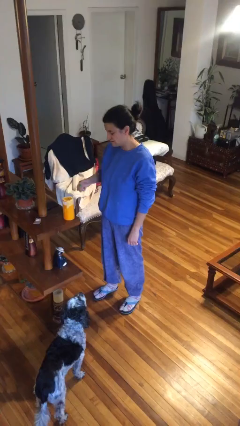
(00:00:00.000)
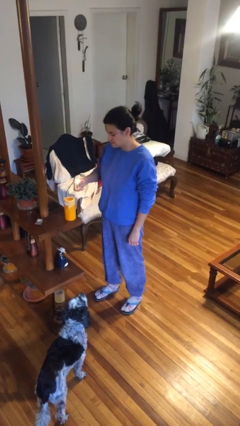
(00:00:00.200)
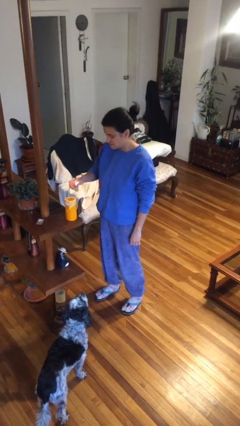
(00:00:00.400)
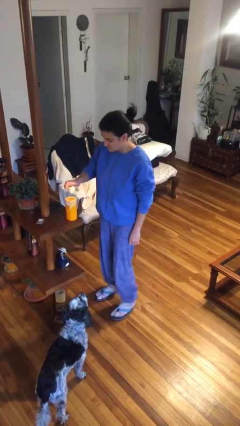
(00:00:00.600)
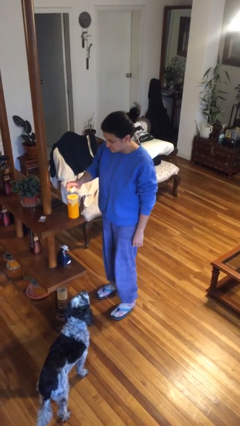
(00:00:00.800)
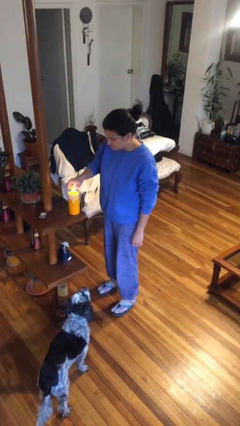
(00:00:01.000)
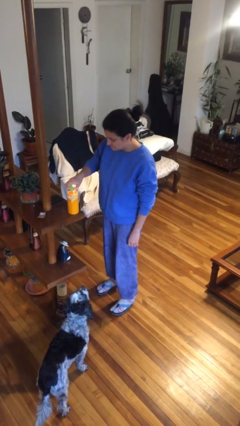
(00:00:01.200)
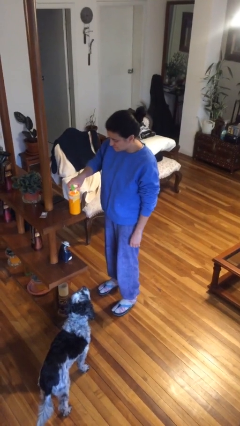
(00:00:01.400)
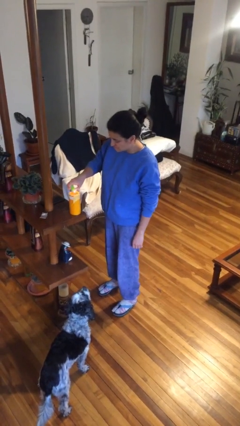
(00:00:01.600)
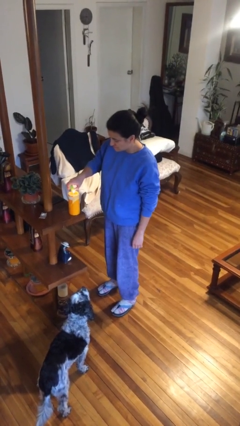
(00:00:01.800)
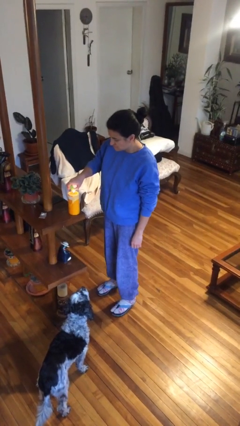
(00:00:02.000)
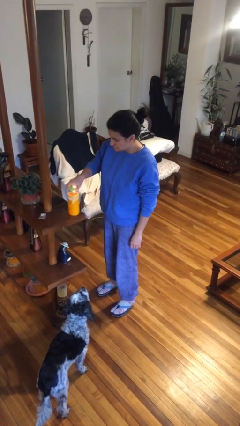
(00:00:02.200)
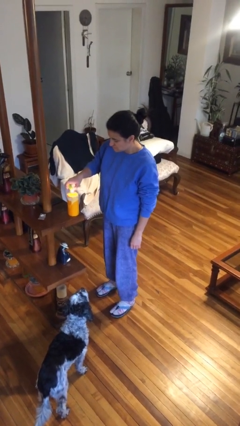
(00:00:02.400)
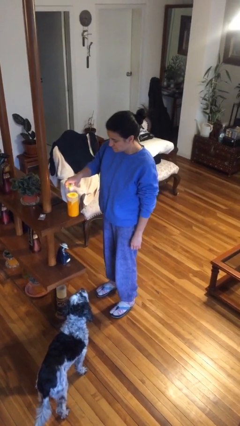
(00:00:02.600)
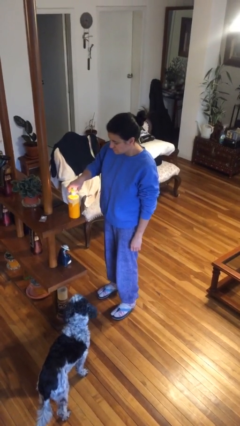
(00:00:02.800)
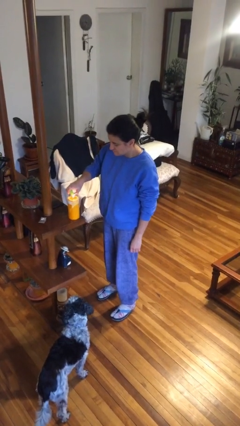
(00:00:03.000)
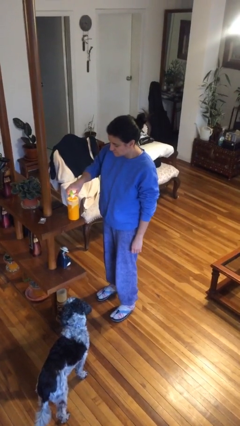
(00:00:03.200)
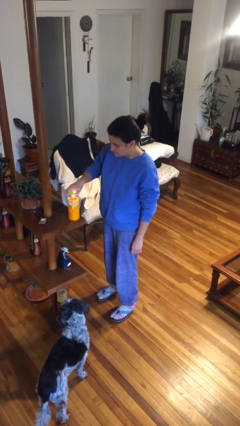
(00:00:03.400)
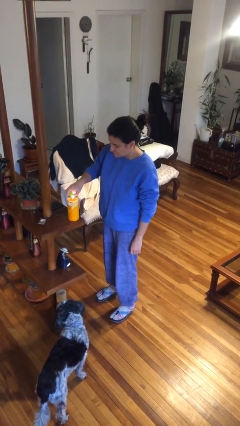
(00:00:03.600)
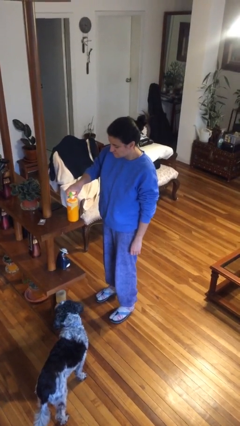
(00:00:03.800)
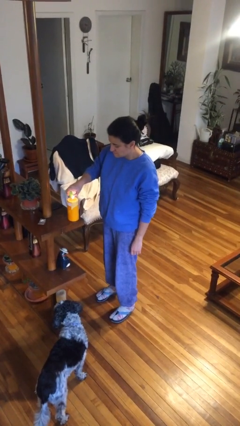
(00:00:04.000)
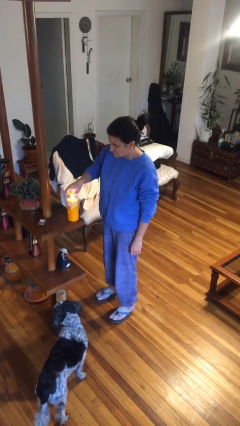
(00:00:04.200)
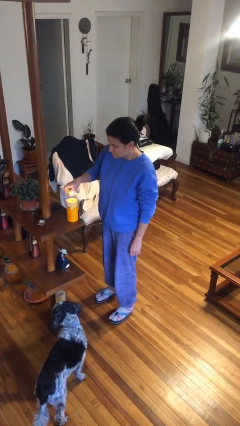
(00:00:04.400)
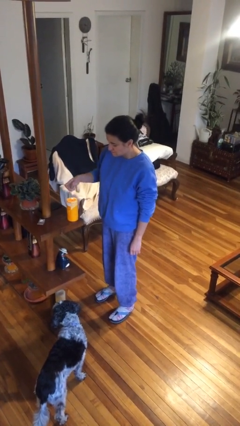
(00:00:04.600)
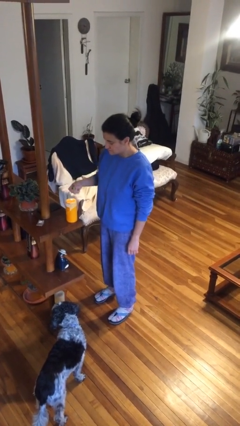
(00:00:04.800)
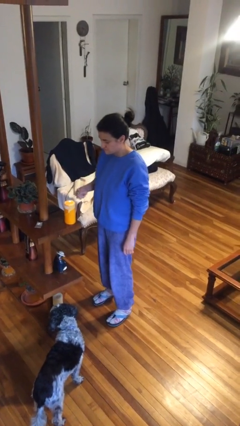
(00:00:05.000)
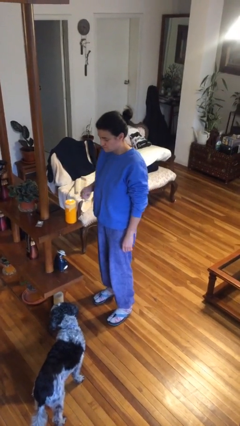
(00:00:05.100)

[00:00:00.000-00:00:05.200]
person lights candle

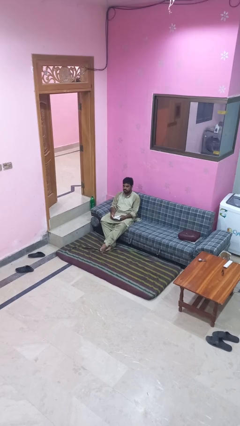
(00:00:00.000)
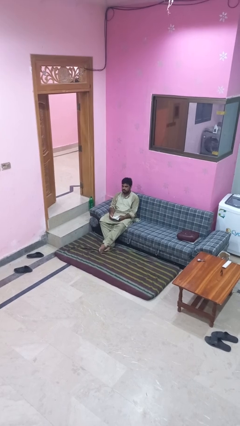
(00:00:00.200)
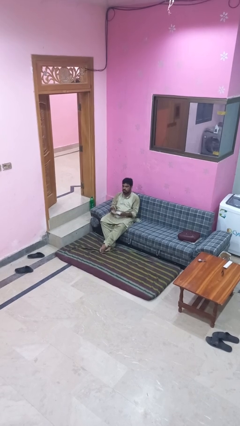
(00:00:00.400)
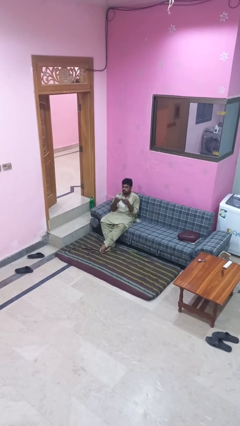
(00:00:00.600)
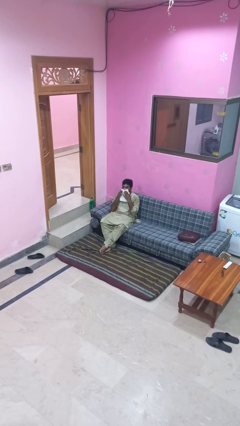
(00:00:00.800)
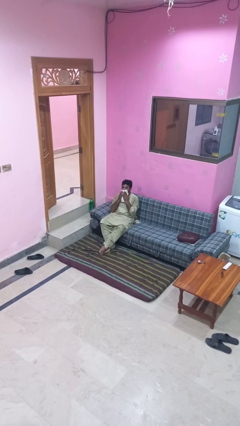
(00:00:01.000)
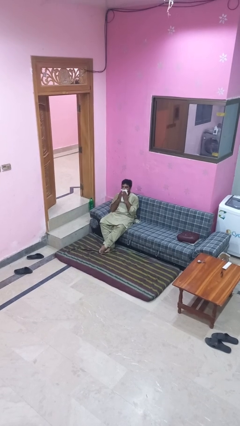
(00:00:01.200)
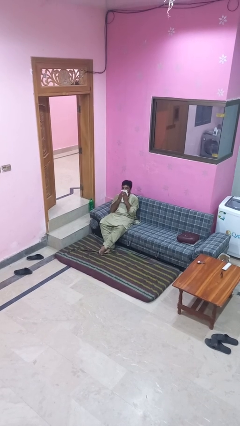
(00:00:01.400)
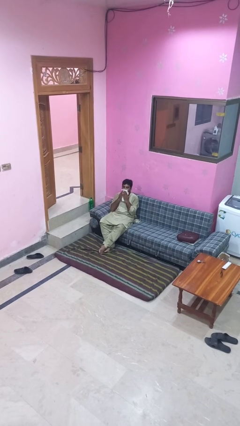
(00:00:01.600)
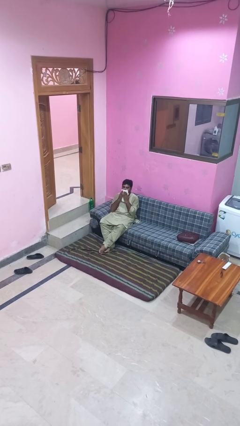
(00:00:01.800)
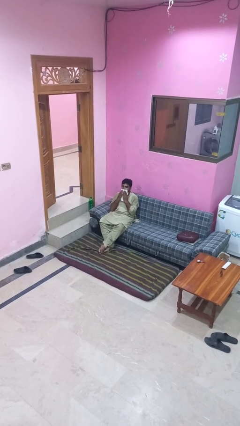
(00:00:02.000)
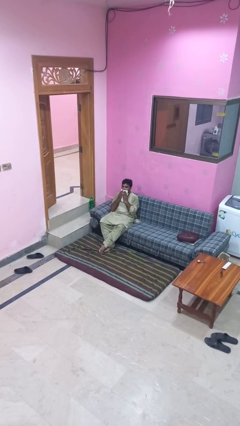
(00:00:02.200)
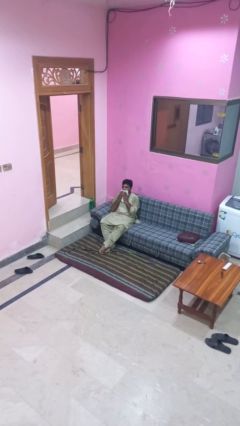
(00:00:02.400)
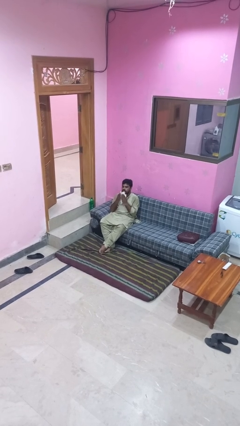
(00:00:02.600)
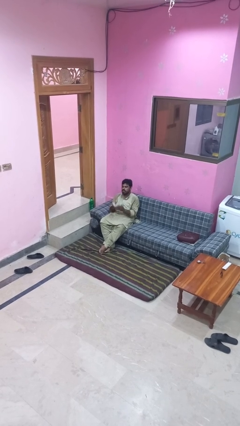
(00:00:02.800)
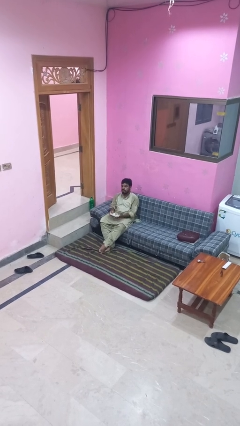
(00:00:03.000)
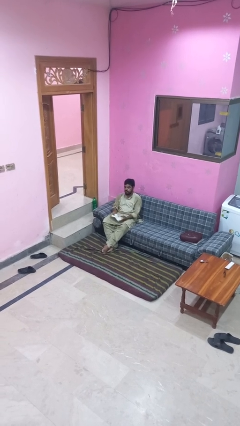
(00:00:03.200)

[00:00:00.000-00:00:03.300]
person wipes mouth with napkin

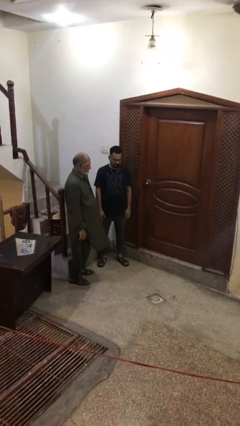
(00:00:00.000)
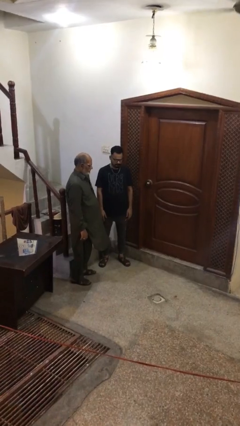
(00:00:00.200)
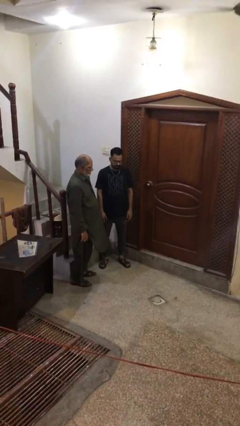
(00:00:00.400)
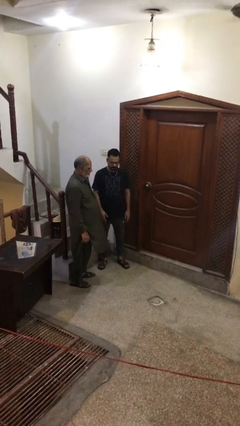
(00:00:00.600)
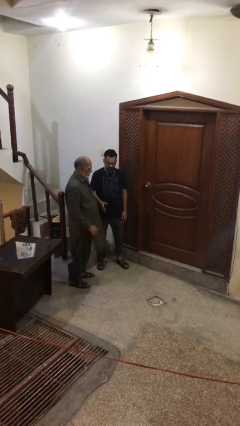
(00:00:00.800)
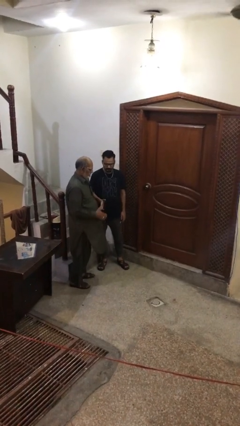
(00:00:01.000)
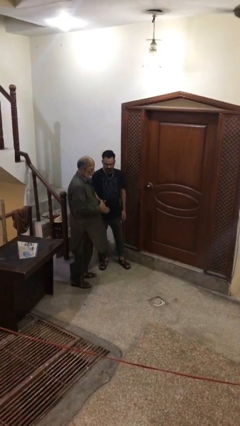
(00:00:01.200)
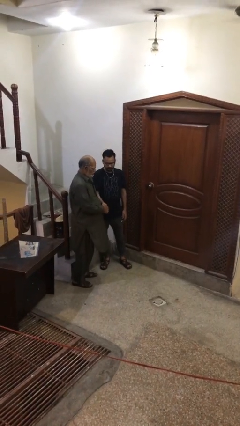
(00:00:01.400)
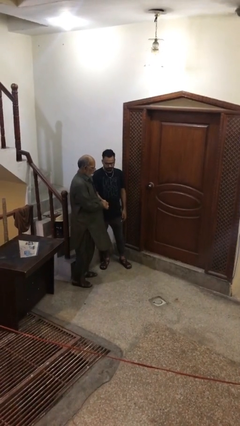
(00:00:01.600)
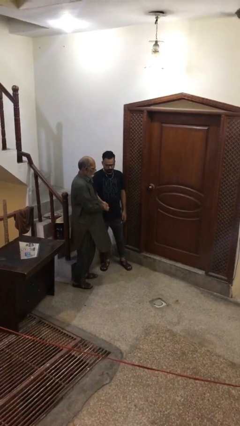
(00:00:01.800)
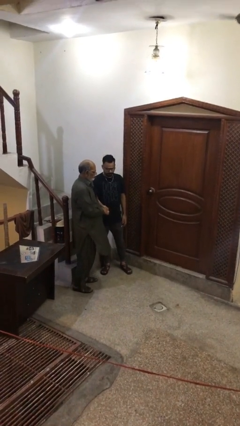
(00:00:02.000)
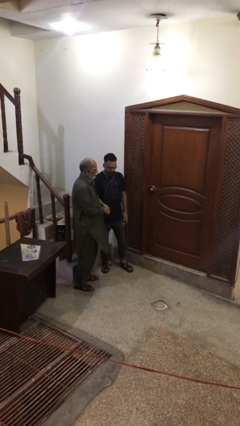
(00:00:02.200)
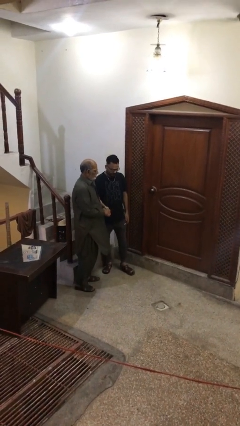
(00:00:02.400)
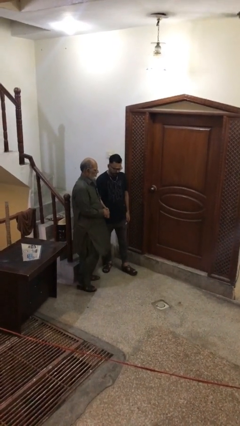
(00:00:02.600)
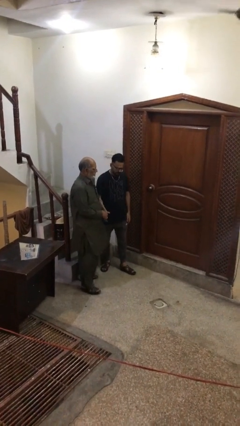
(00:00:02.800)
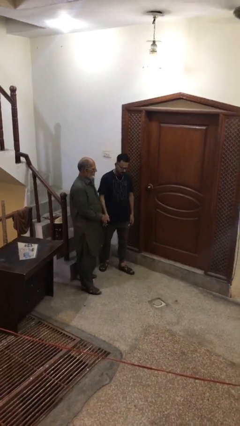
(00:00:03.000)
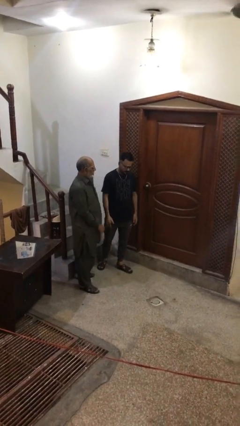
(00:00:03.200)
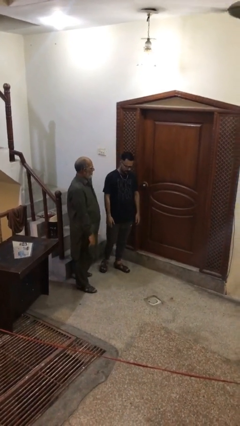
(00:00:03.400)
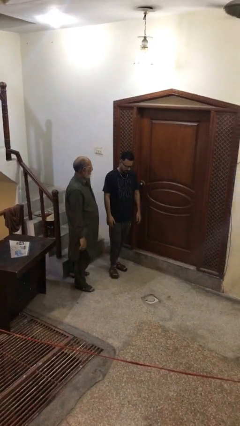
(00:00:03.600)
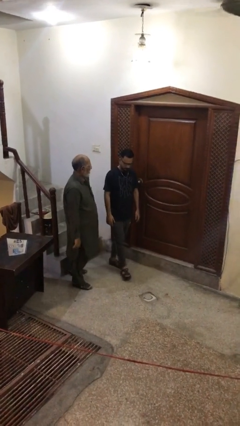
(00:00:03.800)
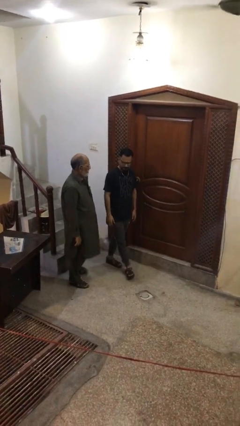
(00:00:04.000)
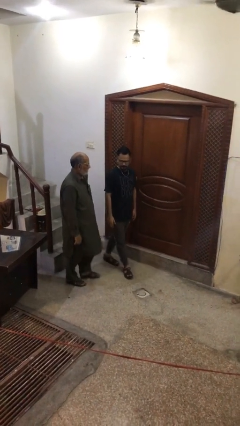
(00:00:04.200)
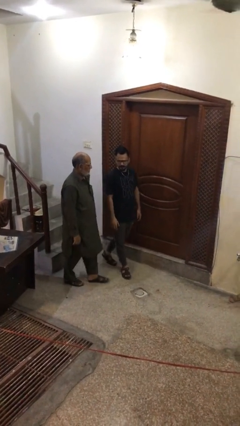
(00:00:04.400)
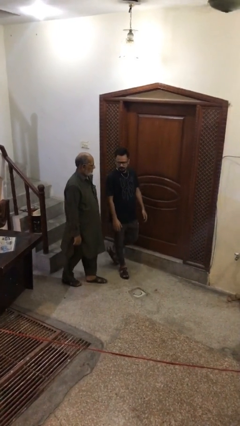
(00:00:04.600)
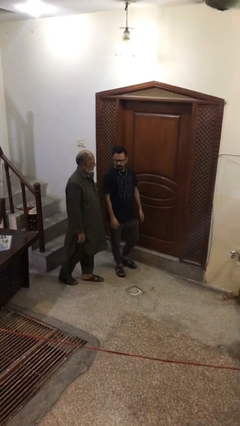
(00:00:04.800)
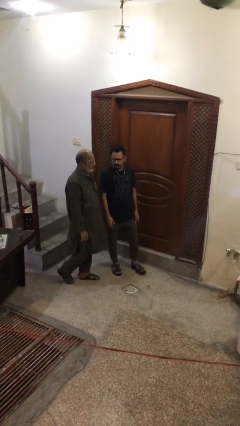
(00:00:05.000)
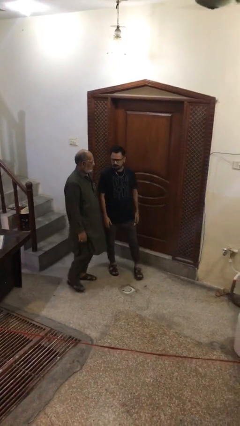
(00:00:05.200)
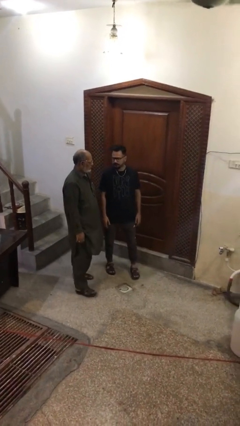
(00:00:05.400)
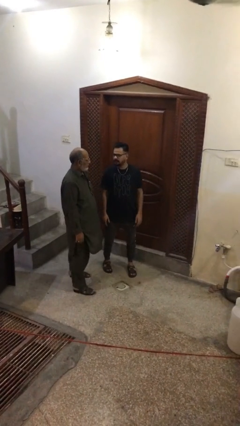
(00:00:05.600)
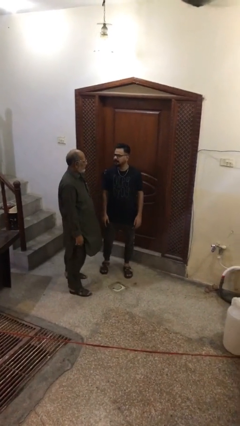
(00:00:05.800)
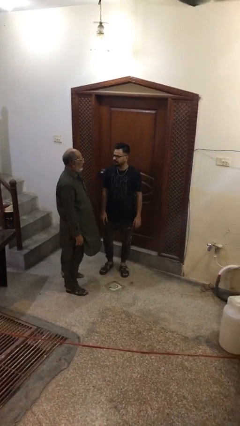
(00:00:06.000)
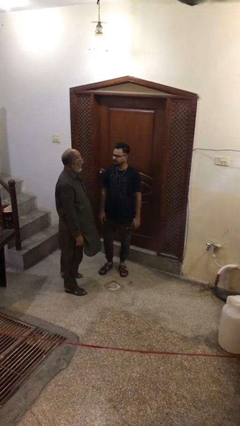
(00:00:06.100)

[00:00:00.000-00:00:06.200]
person shakes hand

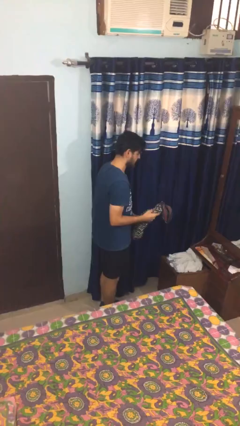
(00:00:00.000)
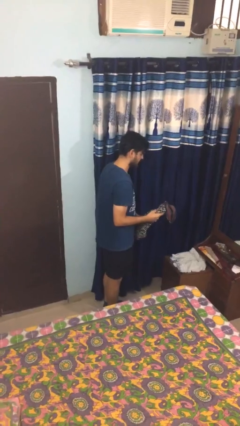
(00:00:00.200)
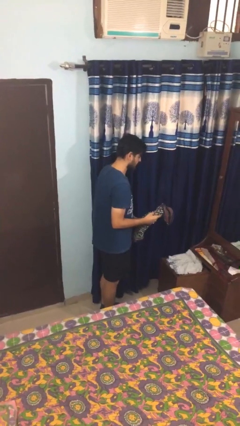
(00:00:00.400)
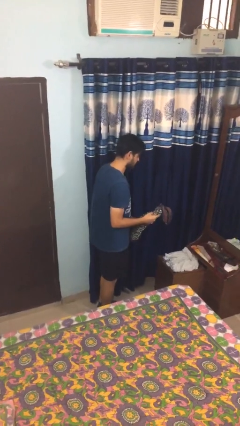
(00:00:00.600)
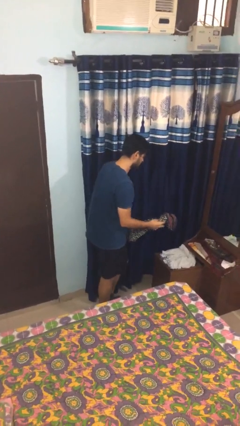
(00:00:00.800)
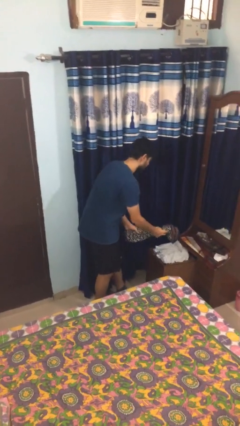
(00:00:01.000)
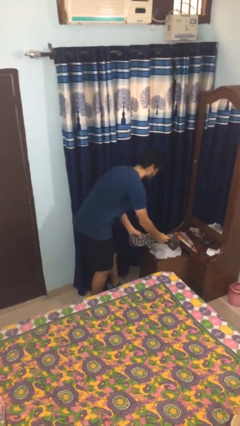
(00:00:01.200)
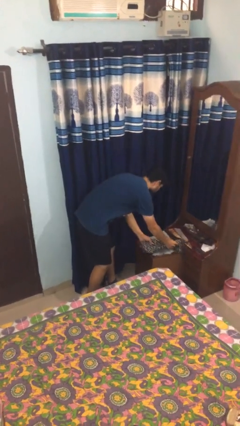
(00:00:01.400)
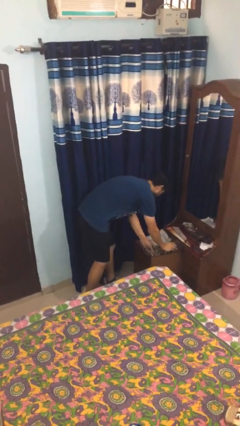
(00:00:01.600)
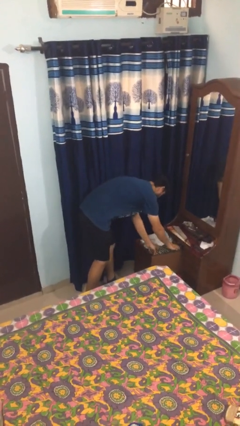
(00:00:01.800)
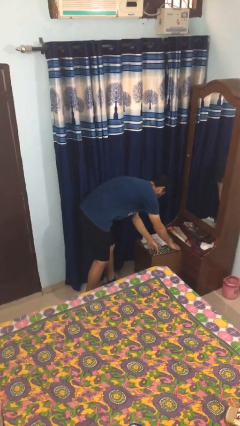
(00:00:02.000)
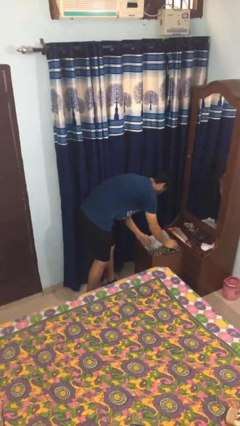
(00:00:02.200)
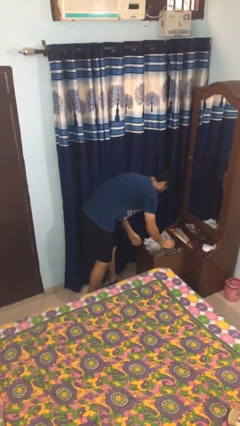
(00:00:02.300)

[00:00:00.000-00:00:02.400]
person puts clothes into dresser

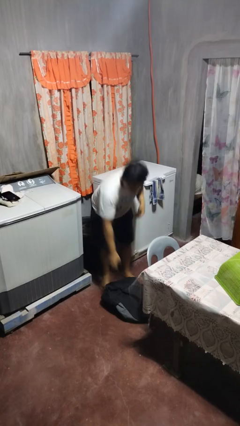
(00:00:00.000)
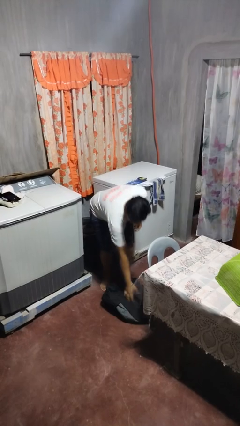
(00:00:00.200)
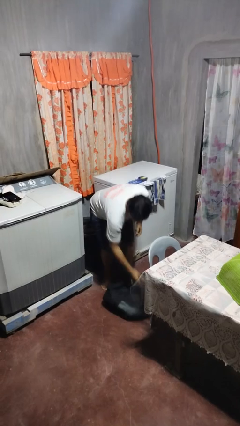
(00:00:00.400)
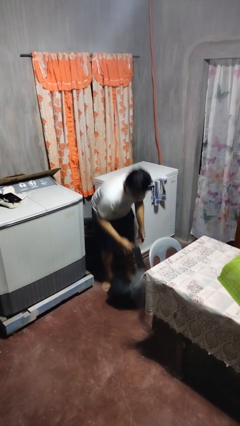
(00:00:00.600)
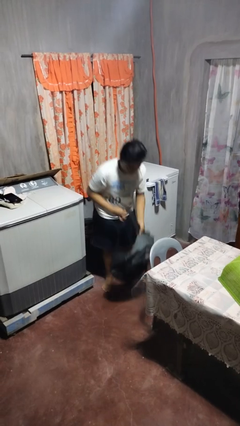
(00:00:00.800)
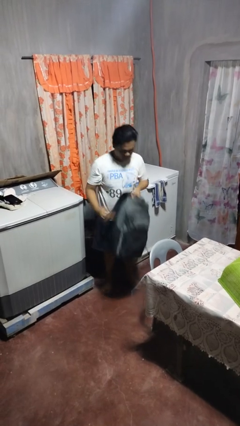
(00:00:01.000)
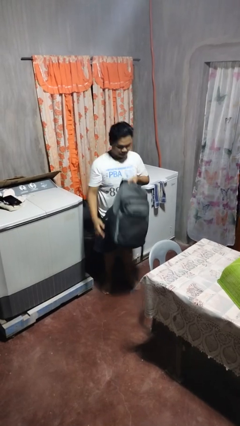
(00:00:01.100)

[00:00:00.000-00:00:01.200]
person picks up object from floor
